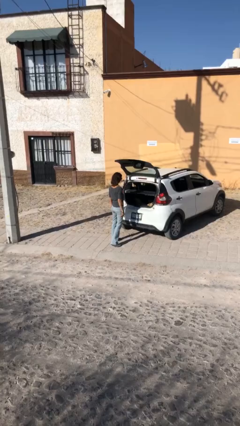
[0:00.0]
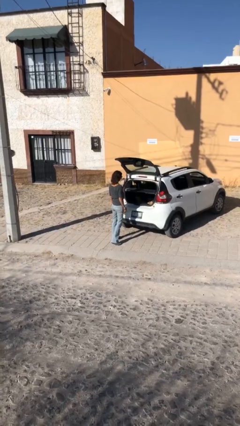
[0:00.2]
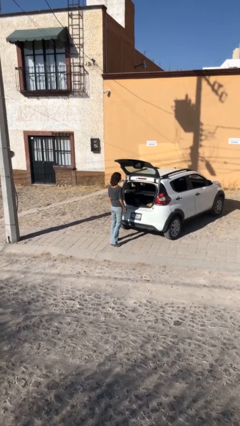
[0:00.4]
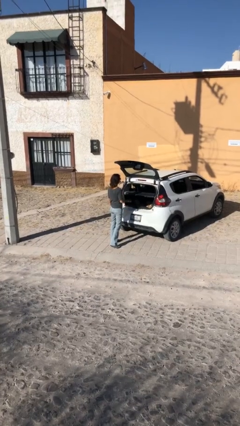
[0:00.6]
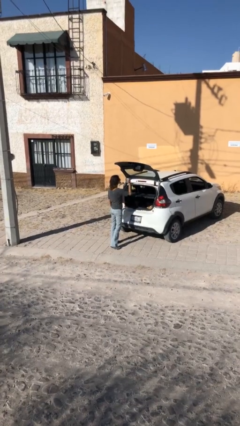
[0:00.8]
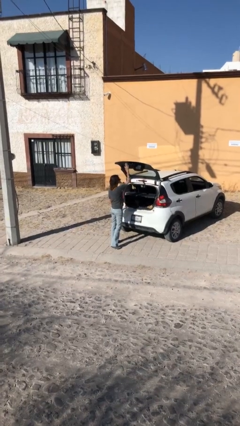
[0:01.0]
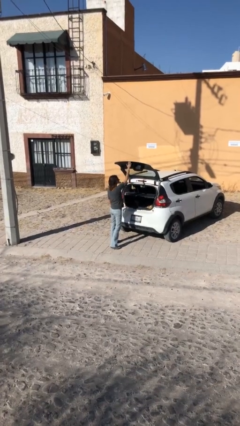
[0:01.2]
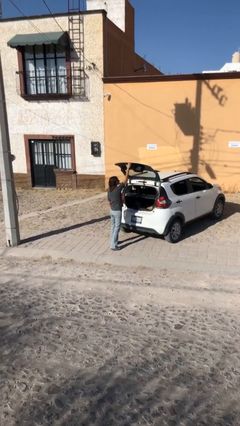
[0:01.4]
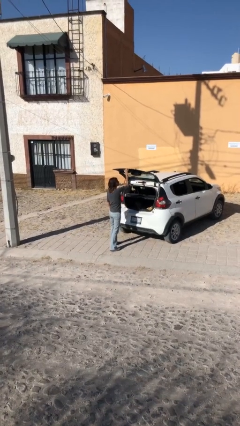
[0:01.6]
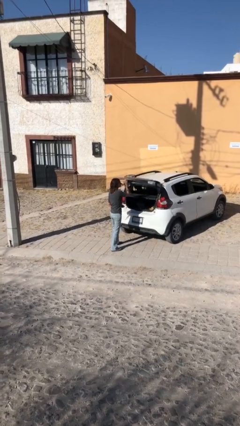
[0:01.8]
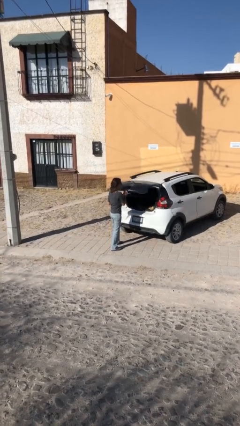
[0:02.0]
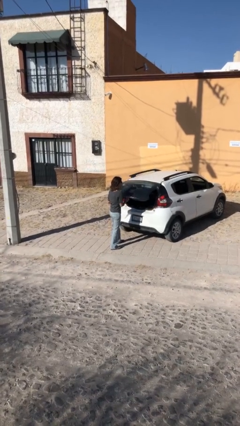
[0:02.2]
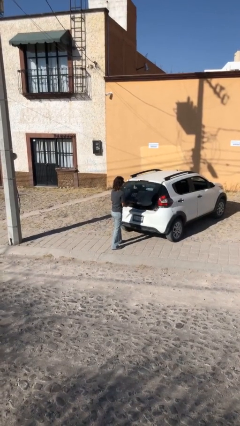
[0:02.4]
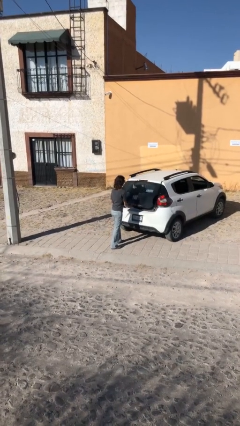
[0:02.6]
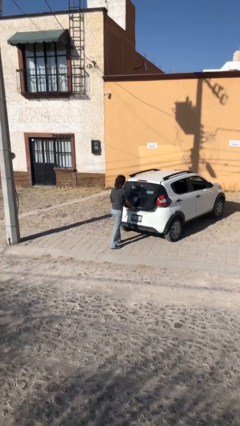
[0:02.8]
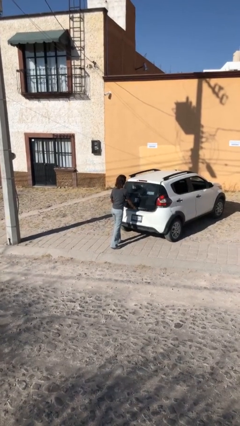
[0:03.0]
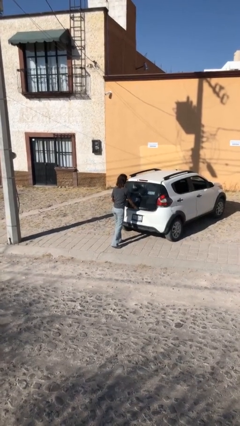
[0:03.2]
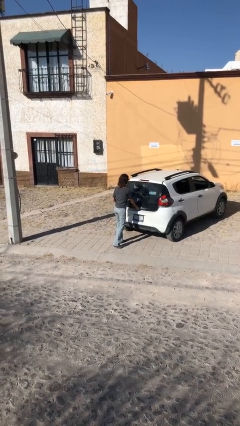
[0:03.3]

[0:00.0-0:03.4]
person closes car trunk

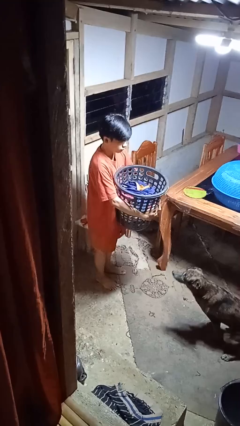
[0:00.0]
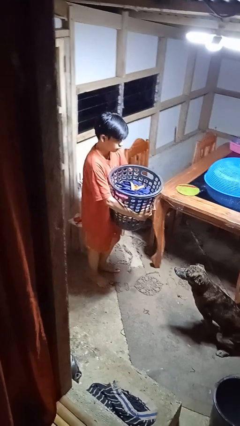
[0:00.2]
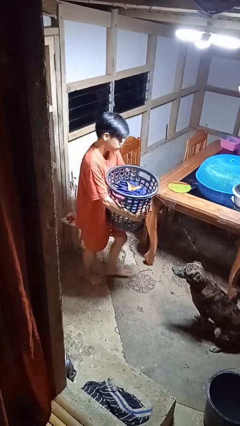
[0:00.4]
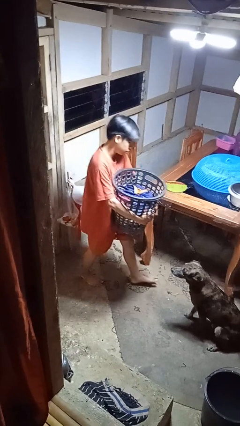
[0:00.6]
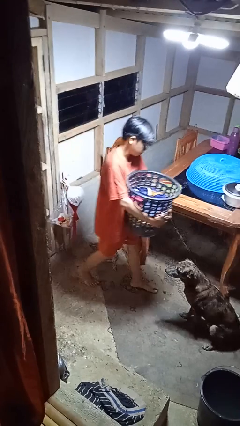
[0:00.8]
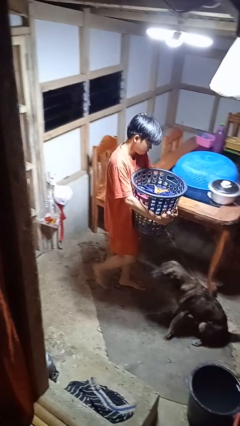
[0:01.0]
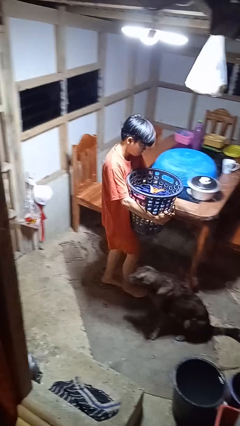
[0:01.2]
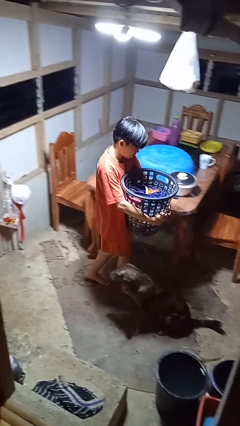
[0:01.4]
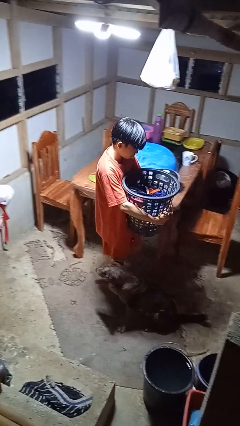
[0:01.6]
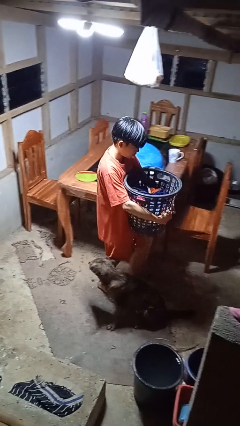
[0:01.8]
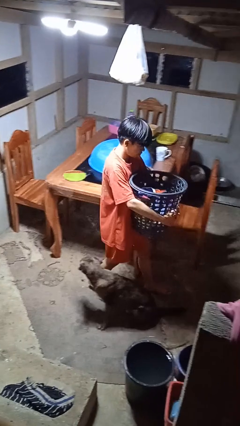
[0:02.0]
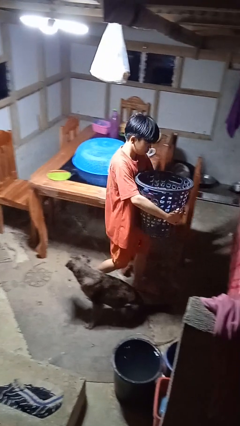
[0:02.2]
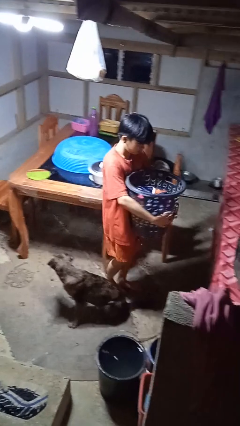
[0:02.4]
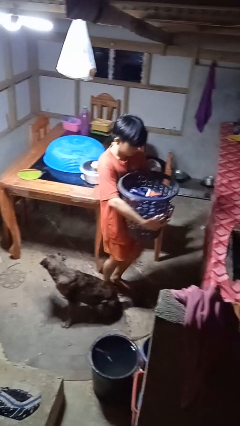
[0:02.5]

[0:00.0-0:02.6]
person carries laundry basket

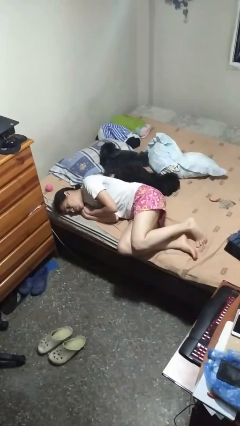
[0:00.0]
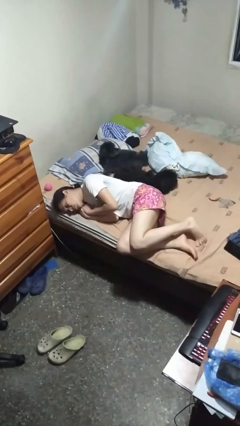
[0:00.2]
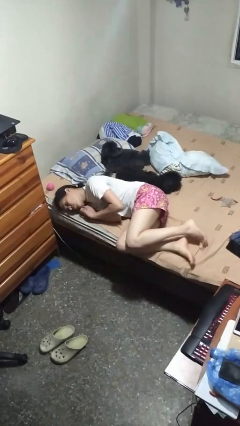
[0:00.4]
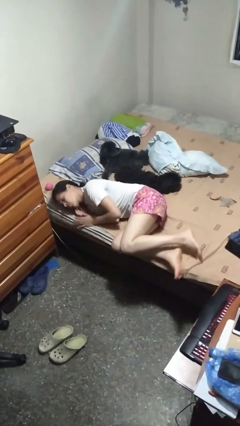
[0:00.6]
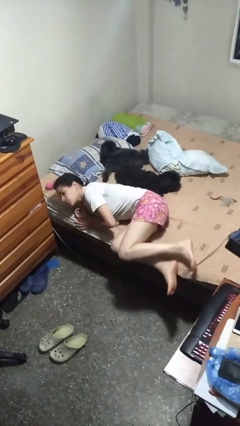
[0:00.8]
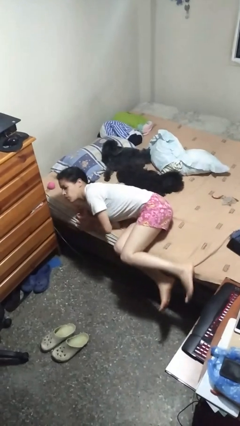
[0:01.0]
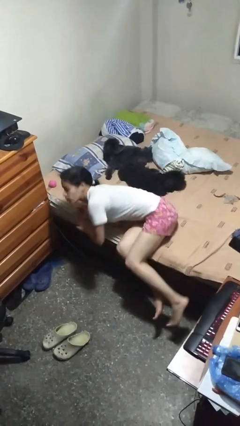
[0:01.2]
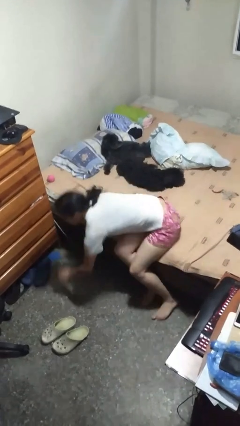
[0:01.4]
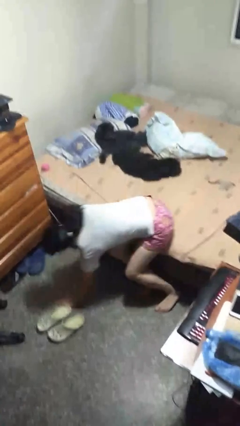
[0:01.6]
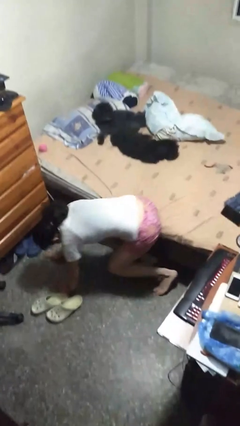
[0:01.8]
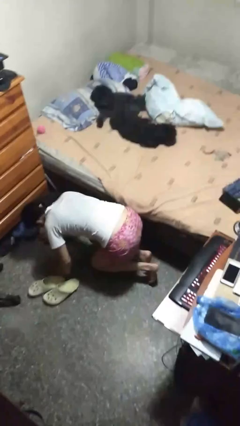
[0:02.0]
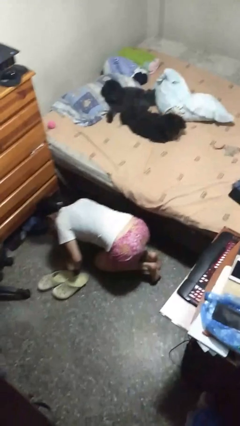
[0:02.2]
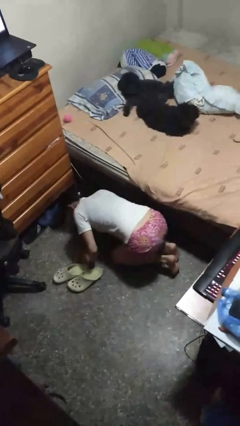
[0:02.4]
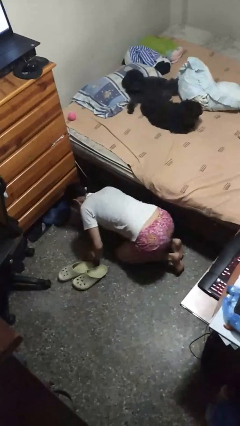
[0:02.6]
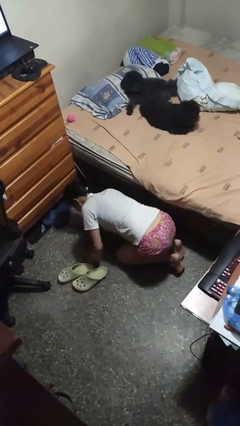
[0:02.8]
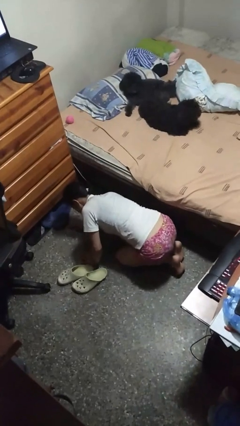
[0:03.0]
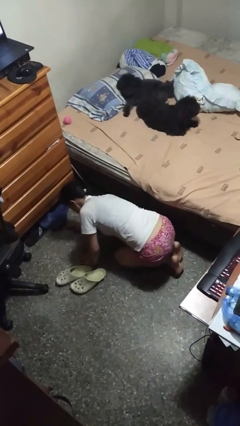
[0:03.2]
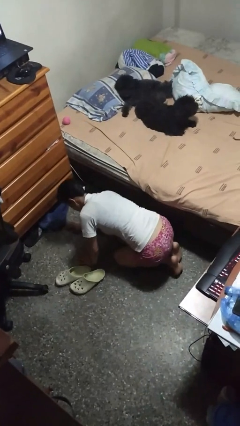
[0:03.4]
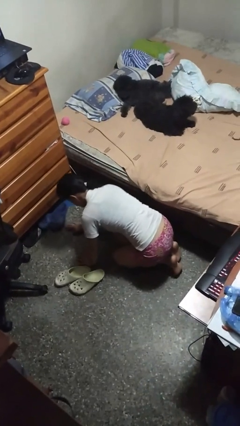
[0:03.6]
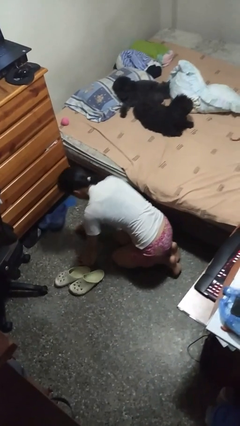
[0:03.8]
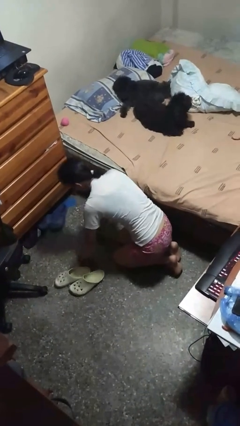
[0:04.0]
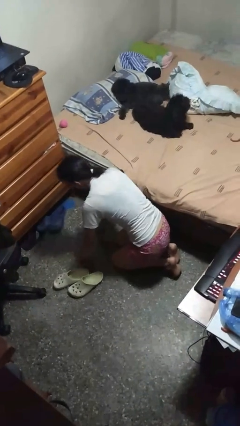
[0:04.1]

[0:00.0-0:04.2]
person falls from bed

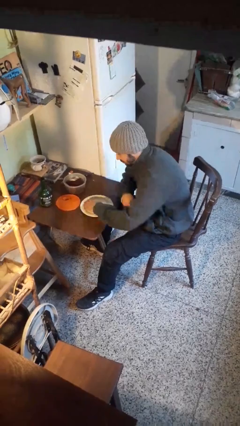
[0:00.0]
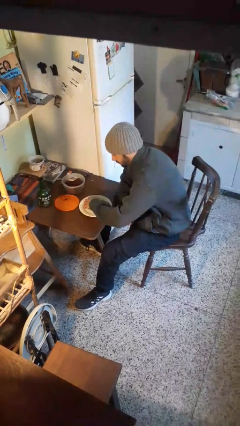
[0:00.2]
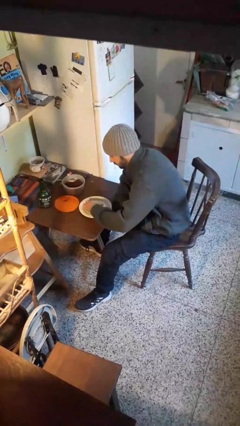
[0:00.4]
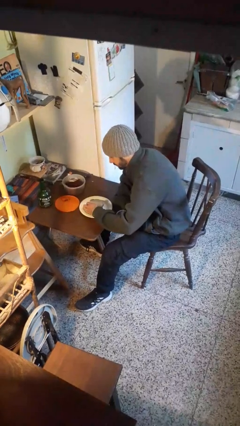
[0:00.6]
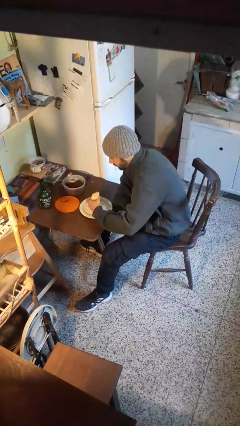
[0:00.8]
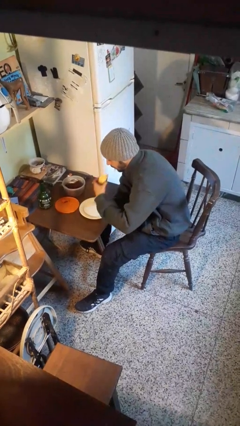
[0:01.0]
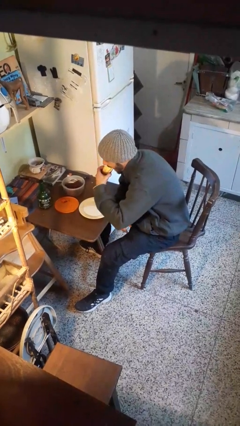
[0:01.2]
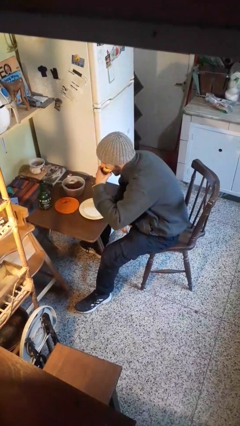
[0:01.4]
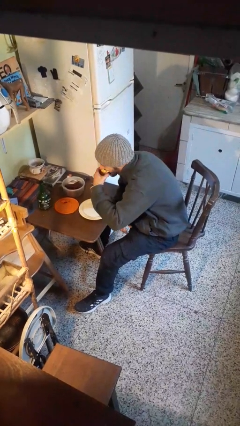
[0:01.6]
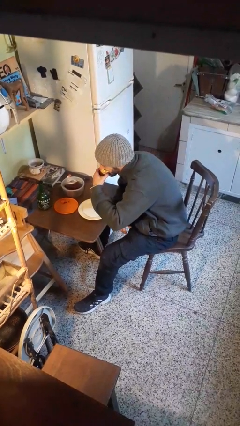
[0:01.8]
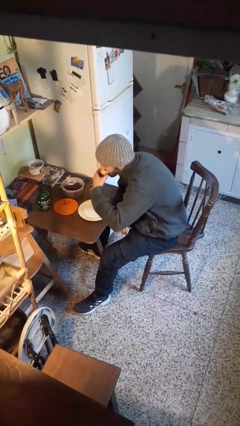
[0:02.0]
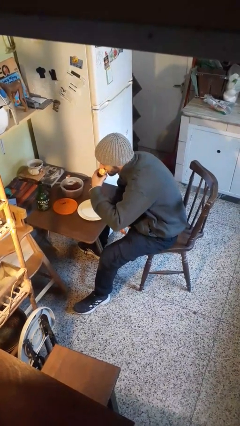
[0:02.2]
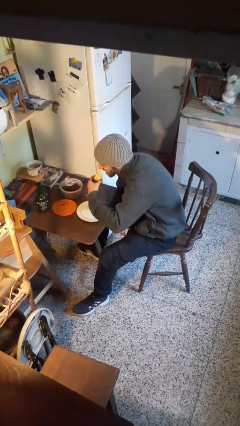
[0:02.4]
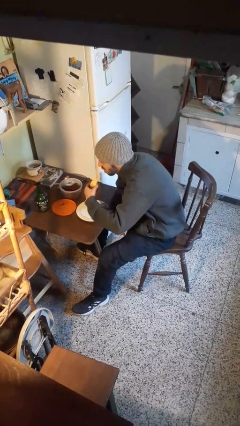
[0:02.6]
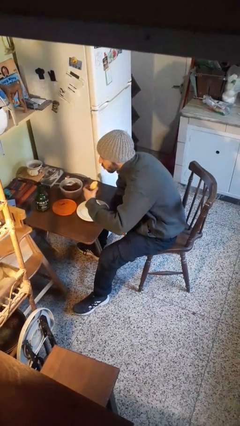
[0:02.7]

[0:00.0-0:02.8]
person eats with hands

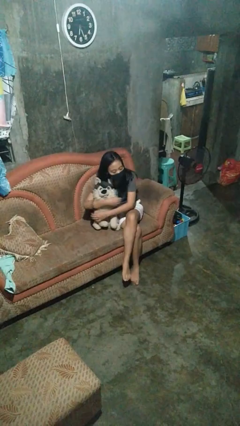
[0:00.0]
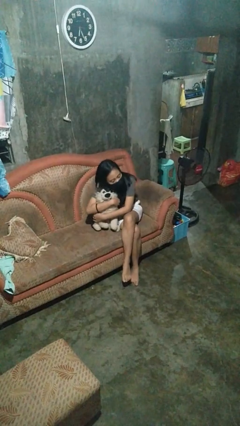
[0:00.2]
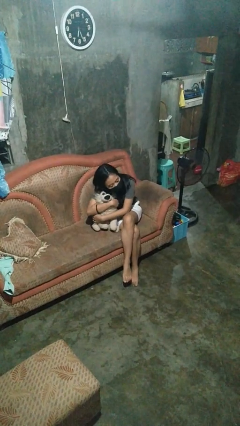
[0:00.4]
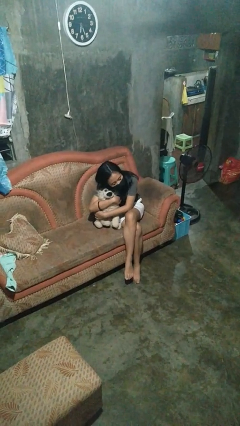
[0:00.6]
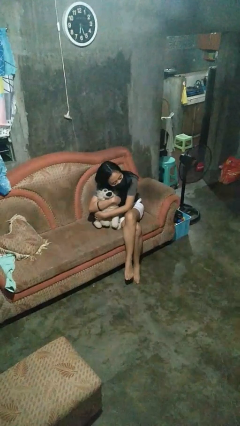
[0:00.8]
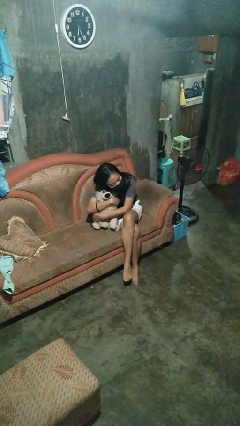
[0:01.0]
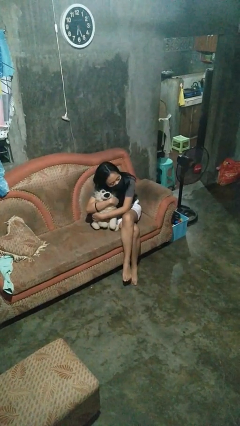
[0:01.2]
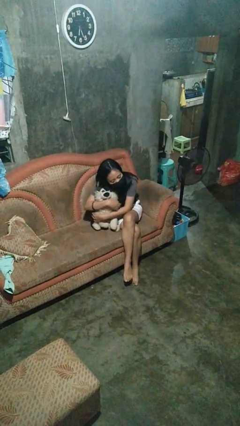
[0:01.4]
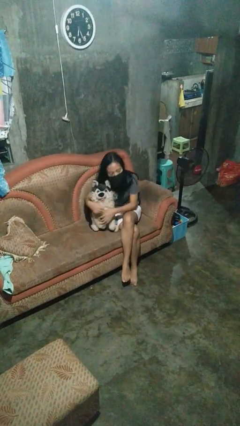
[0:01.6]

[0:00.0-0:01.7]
person hugs stuffed animal

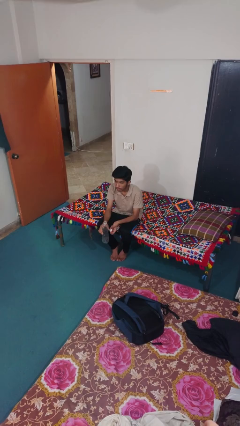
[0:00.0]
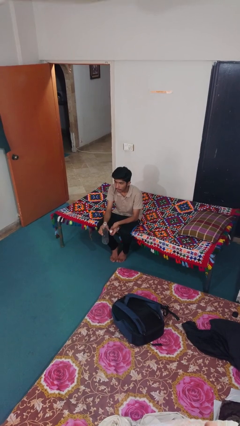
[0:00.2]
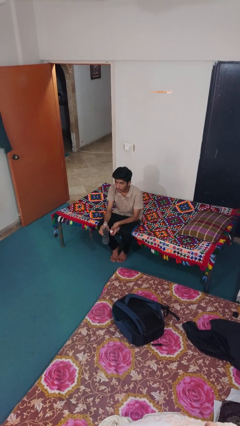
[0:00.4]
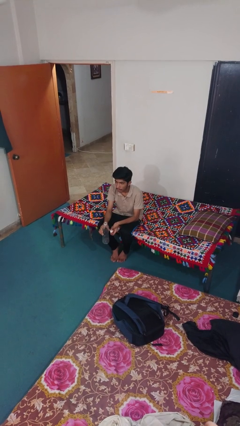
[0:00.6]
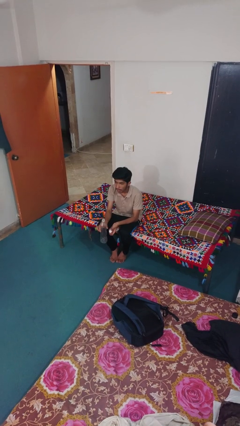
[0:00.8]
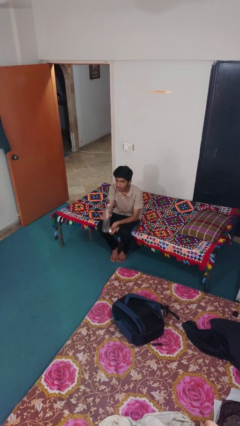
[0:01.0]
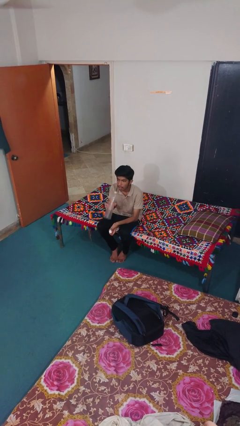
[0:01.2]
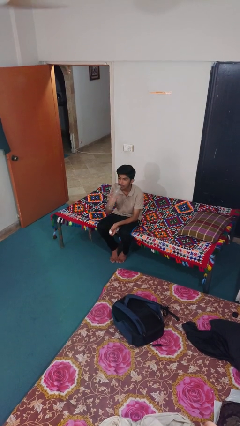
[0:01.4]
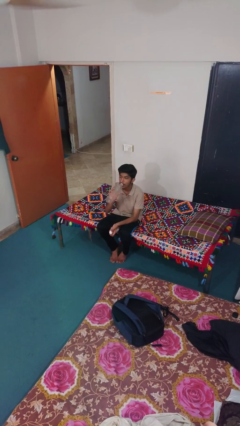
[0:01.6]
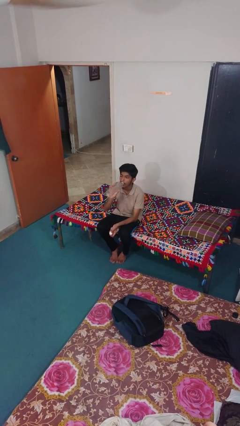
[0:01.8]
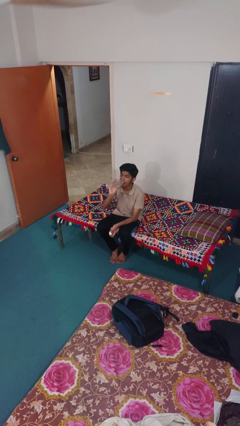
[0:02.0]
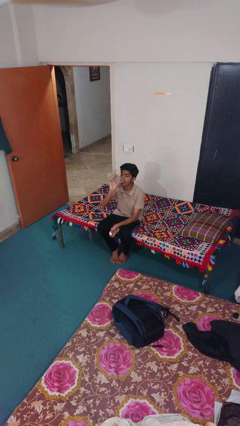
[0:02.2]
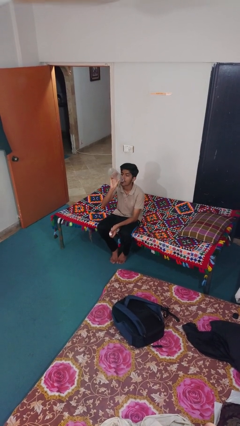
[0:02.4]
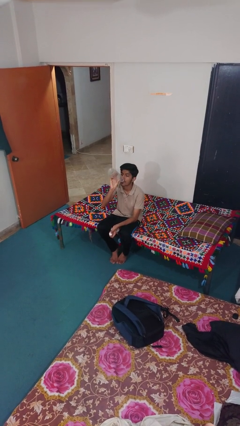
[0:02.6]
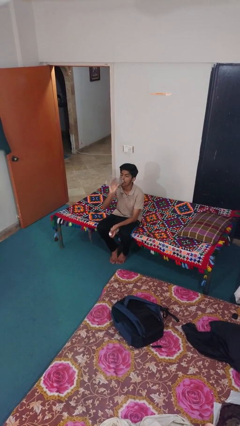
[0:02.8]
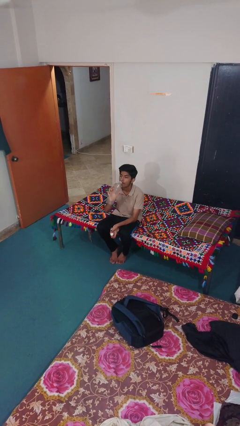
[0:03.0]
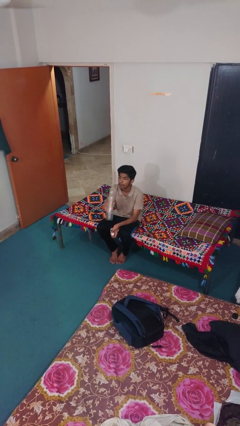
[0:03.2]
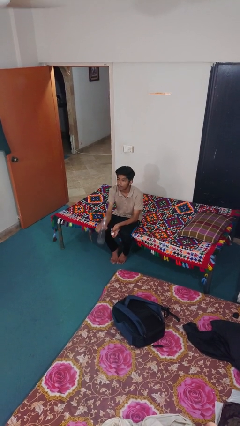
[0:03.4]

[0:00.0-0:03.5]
person drinks from bottle
